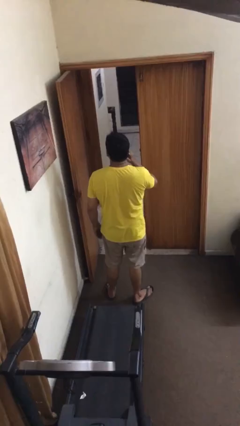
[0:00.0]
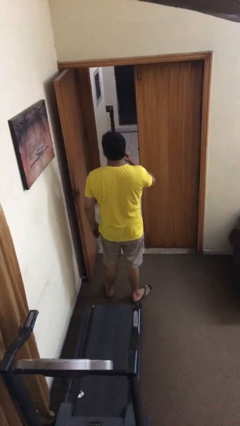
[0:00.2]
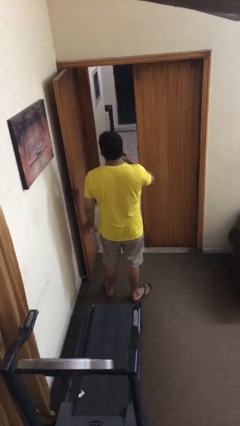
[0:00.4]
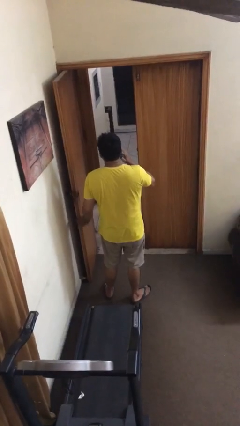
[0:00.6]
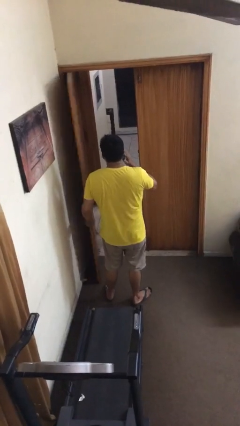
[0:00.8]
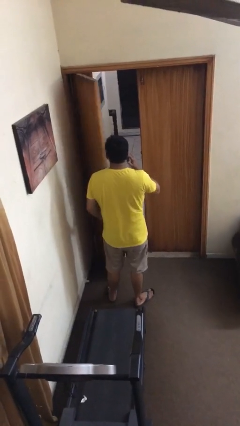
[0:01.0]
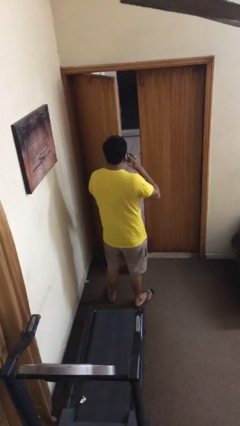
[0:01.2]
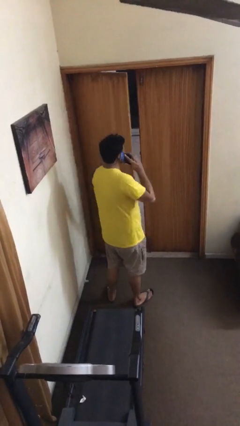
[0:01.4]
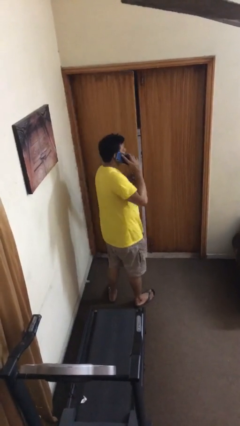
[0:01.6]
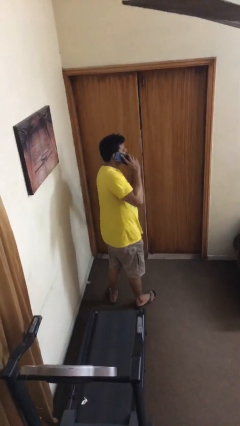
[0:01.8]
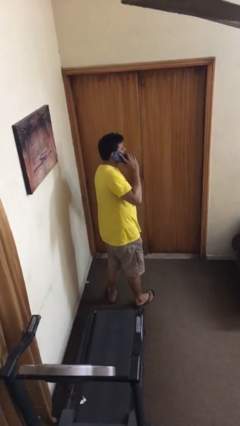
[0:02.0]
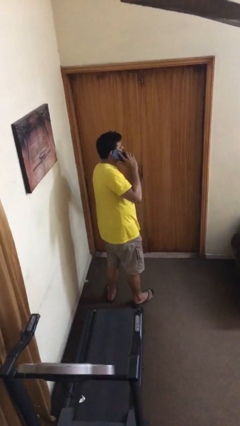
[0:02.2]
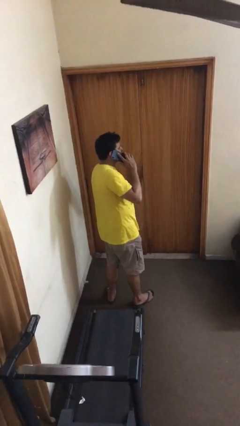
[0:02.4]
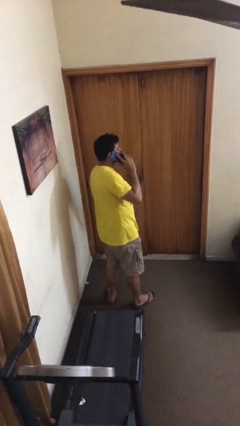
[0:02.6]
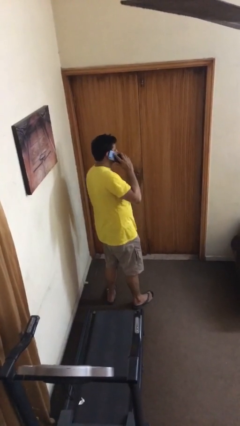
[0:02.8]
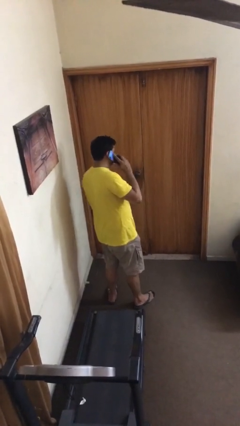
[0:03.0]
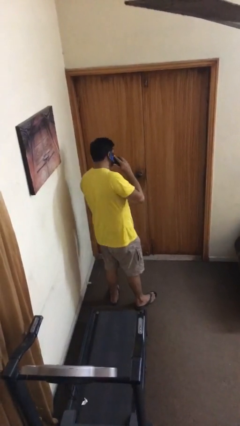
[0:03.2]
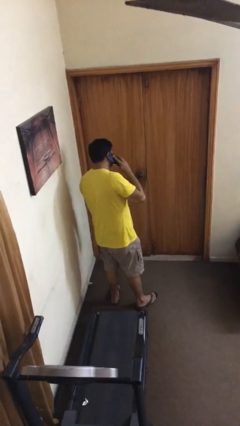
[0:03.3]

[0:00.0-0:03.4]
person closes facility door

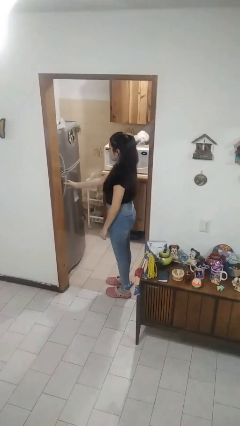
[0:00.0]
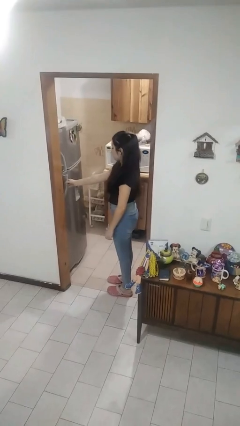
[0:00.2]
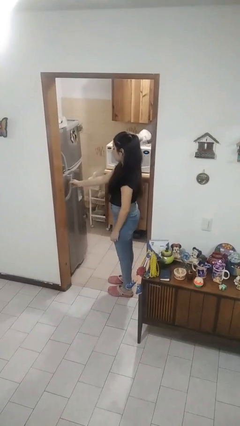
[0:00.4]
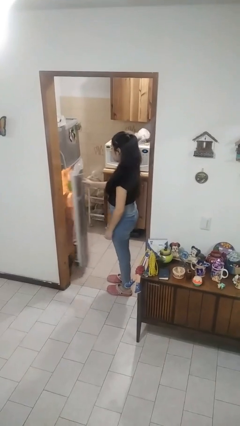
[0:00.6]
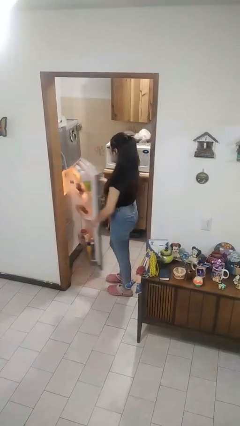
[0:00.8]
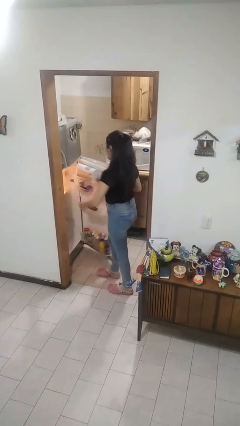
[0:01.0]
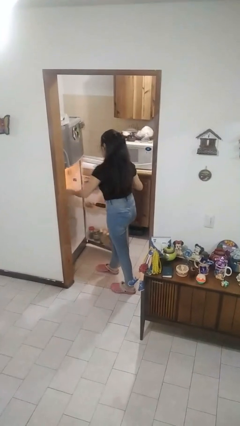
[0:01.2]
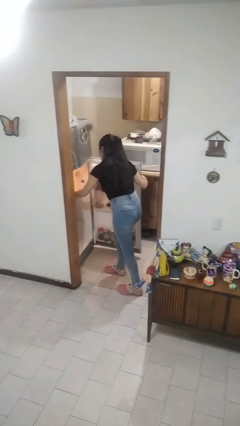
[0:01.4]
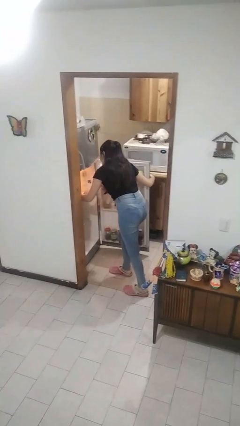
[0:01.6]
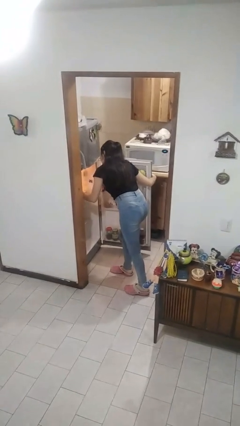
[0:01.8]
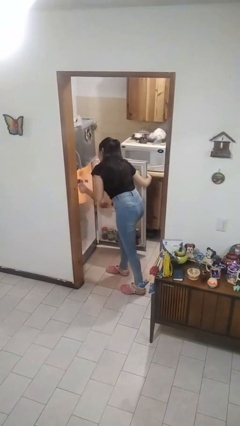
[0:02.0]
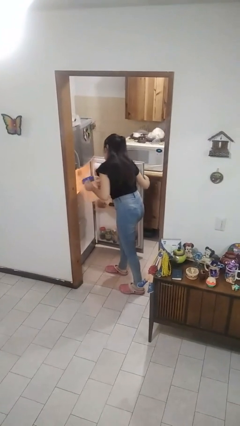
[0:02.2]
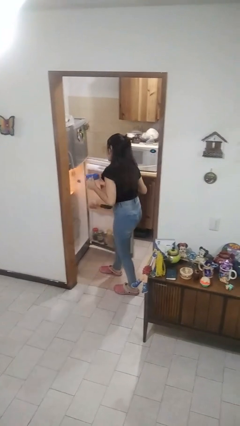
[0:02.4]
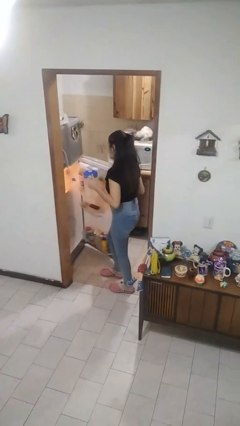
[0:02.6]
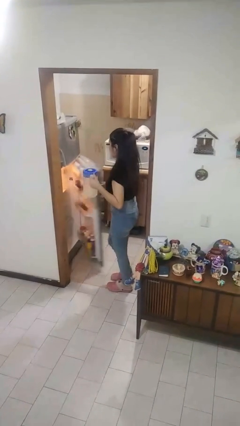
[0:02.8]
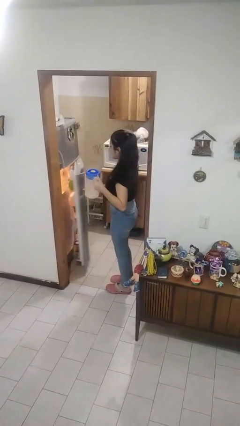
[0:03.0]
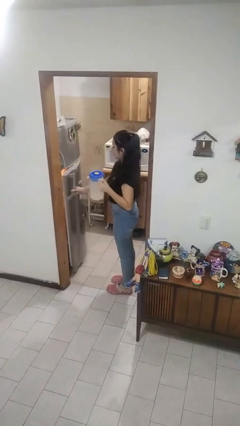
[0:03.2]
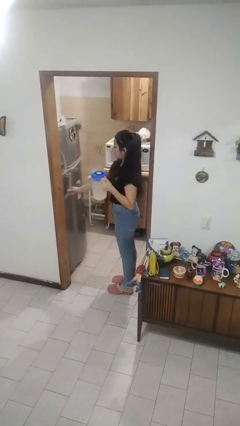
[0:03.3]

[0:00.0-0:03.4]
person takes object from refrigerator

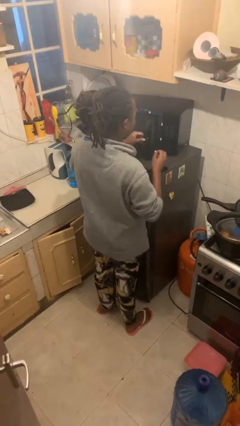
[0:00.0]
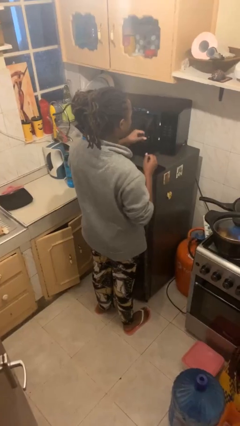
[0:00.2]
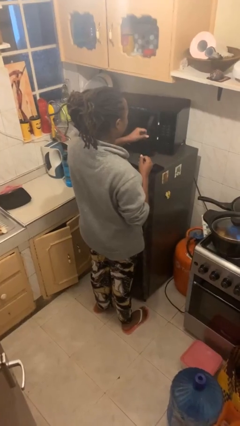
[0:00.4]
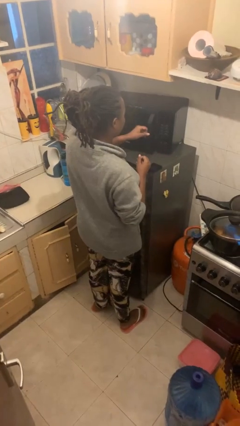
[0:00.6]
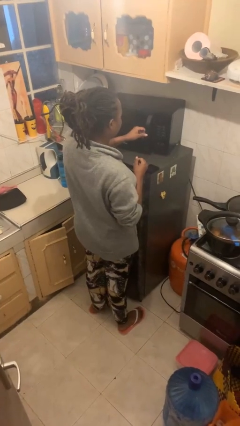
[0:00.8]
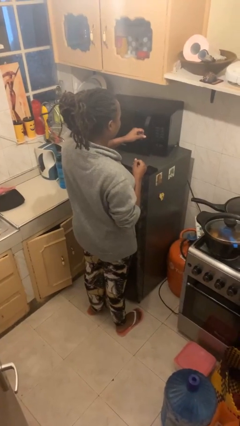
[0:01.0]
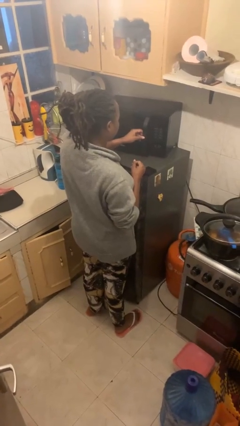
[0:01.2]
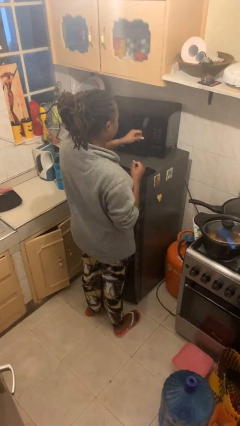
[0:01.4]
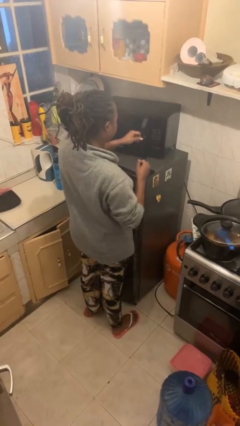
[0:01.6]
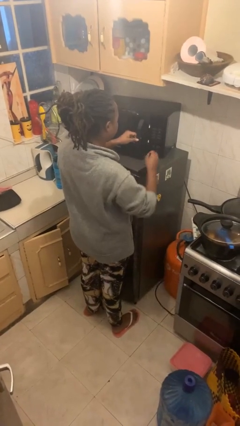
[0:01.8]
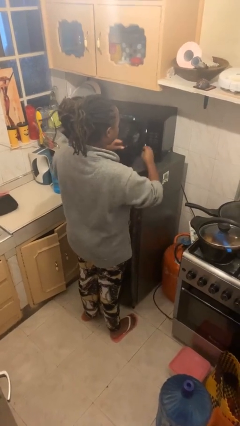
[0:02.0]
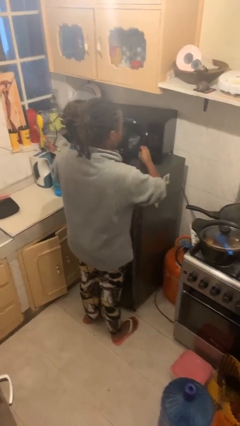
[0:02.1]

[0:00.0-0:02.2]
person closes microwave

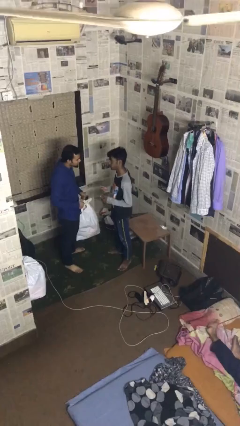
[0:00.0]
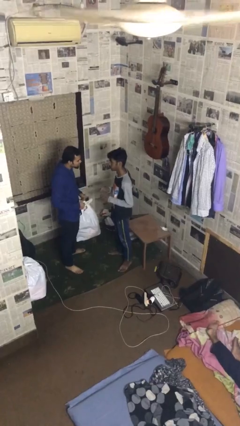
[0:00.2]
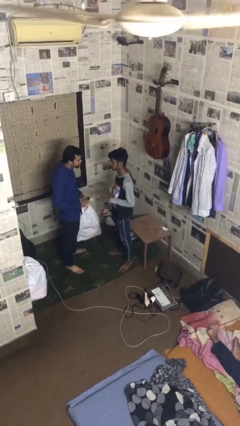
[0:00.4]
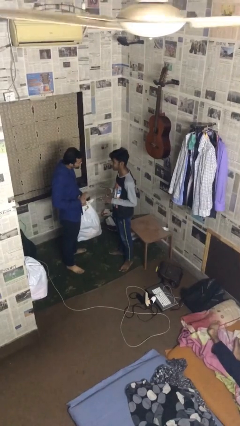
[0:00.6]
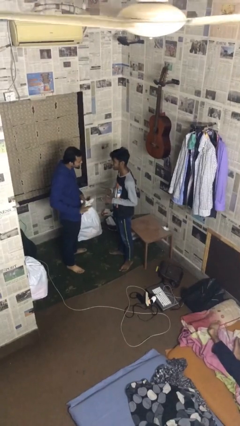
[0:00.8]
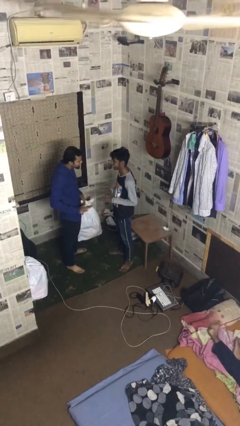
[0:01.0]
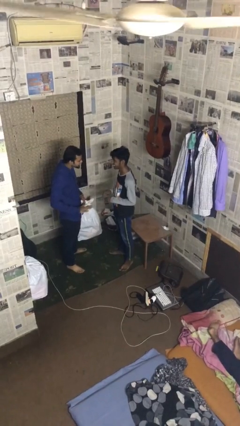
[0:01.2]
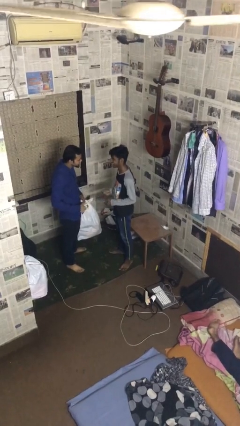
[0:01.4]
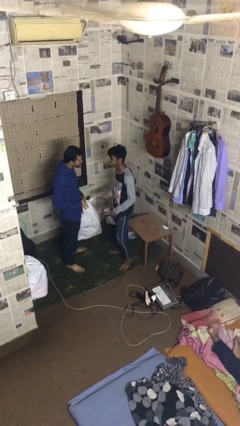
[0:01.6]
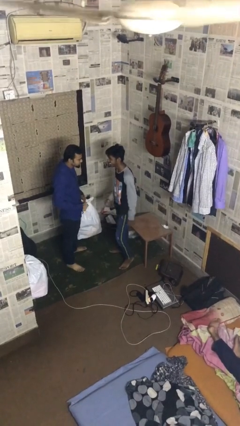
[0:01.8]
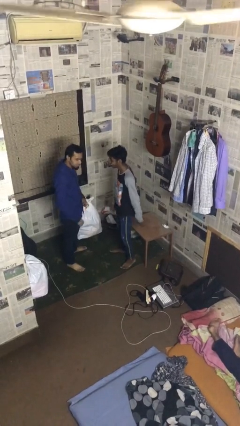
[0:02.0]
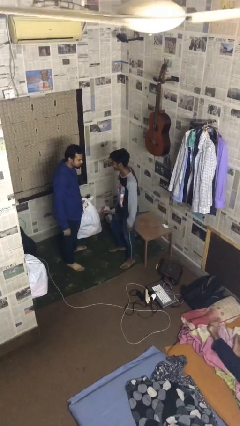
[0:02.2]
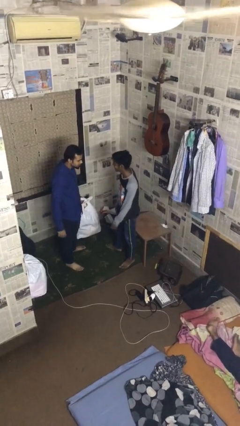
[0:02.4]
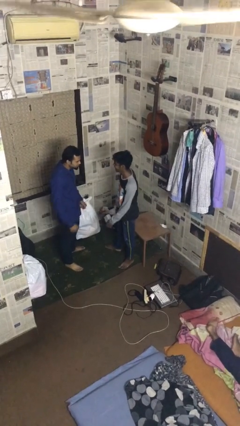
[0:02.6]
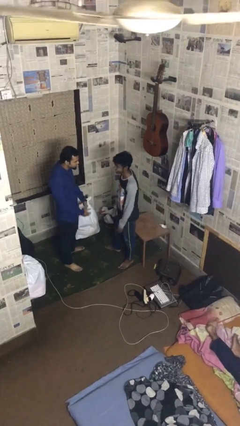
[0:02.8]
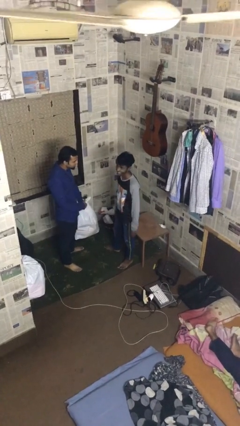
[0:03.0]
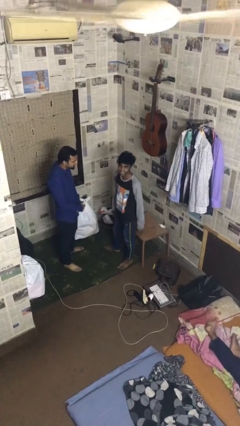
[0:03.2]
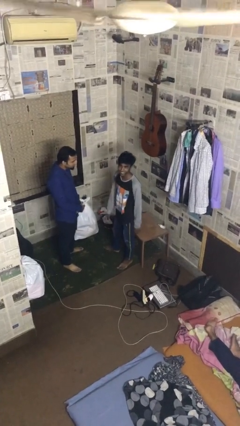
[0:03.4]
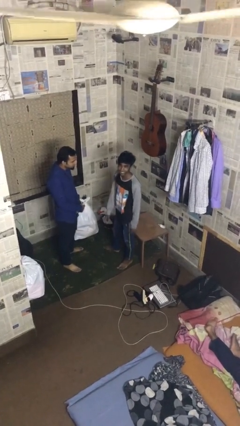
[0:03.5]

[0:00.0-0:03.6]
person talks to person

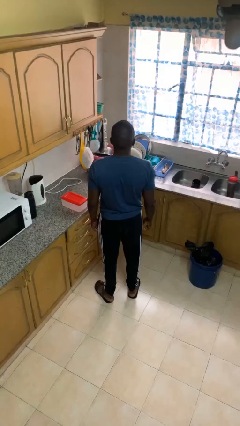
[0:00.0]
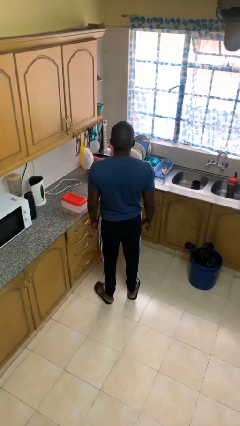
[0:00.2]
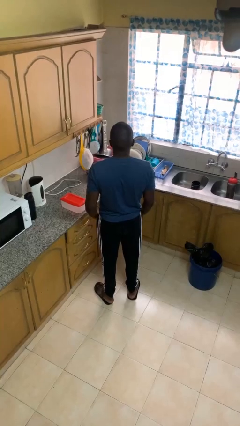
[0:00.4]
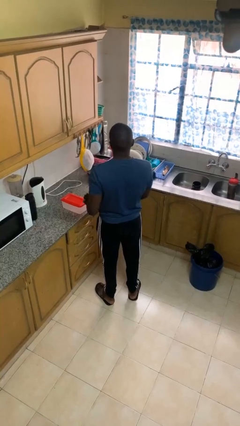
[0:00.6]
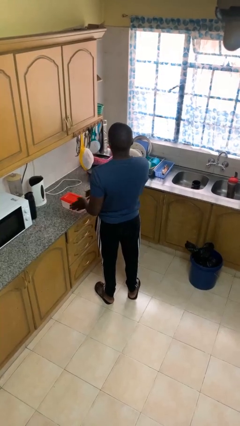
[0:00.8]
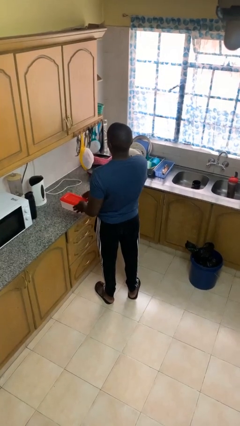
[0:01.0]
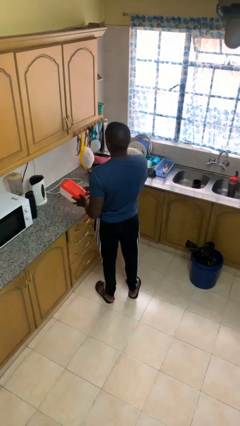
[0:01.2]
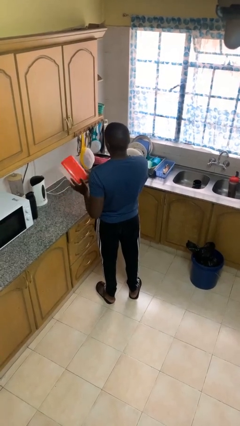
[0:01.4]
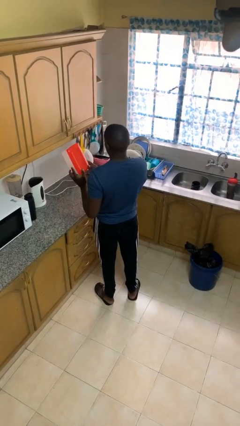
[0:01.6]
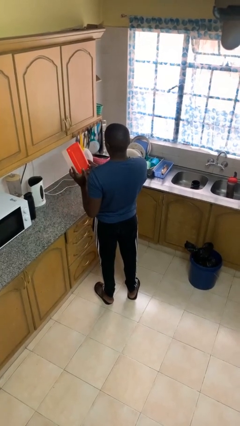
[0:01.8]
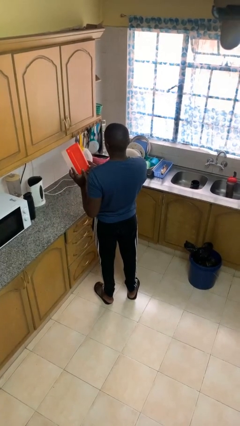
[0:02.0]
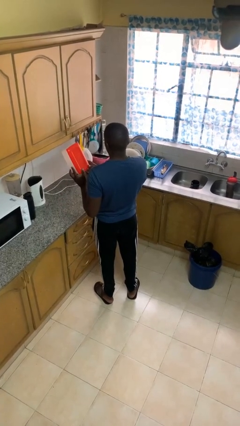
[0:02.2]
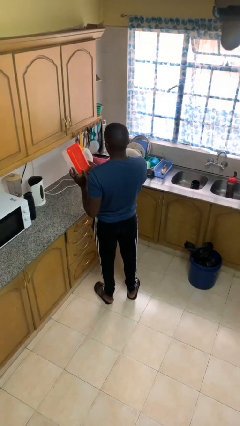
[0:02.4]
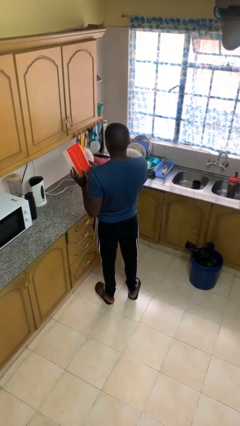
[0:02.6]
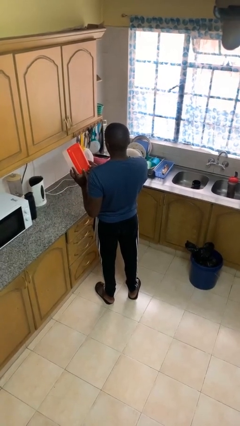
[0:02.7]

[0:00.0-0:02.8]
person picks up object from countertop

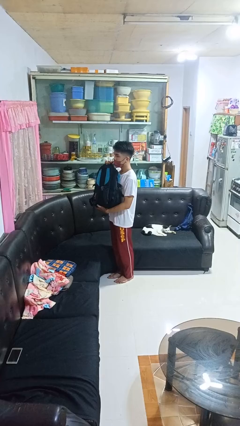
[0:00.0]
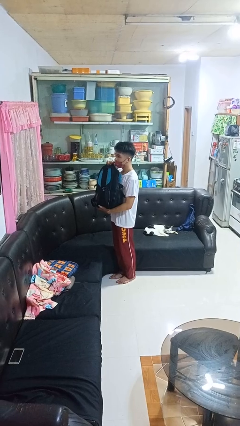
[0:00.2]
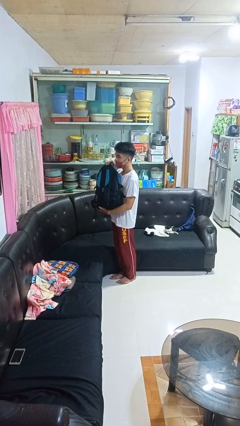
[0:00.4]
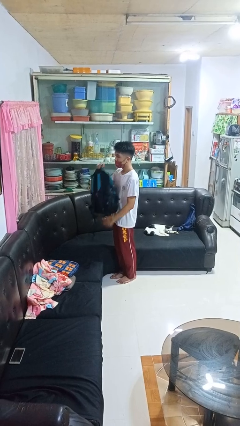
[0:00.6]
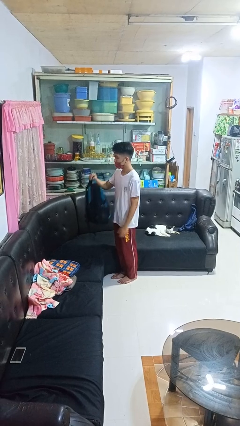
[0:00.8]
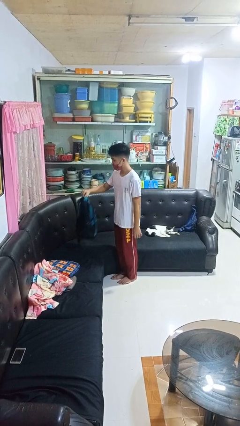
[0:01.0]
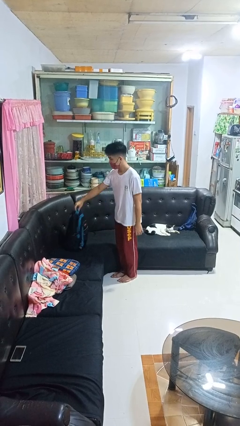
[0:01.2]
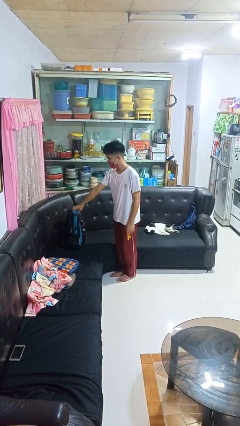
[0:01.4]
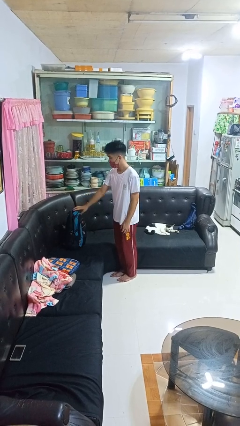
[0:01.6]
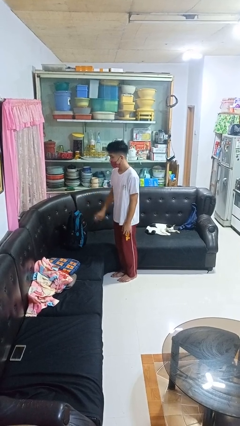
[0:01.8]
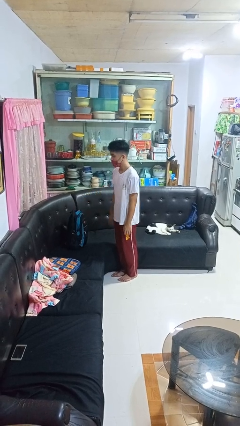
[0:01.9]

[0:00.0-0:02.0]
person puts down object on couch
